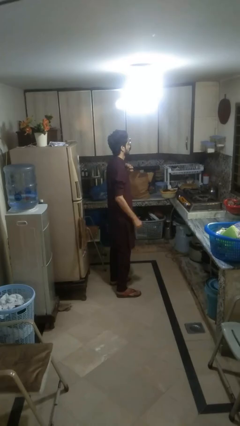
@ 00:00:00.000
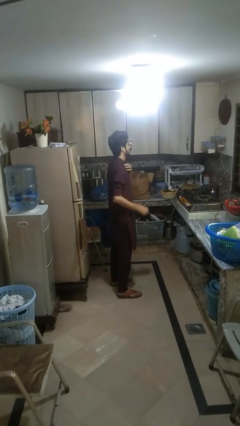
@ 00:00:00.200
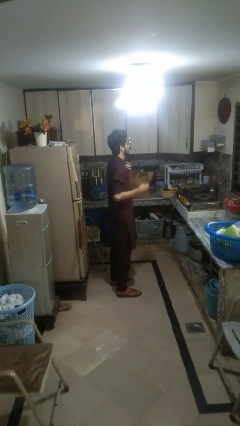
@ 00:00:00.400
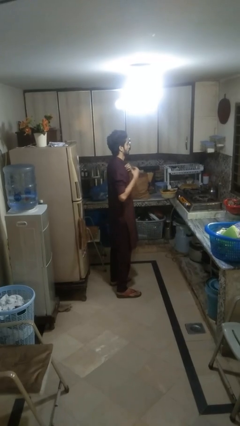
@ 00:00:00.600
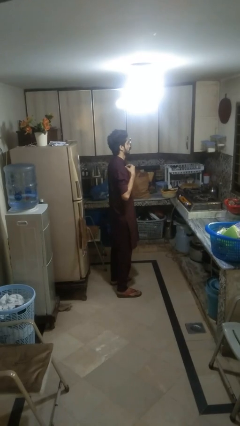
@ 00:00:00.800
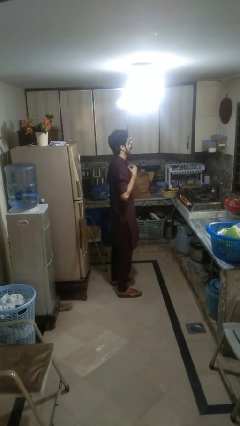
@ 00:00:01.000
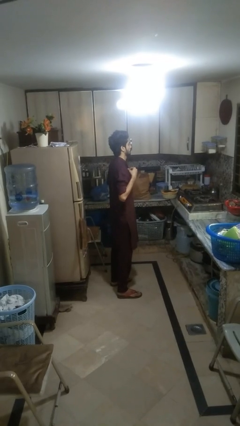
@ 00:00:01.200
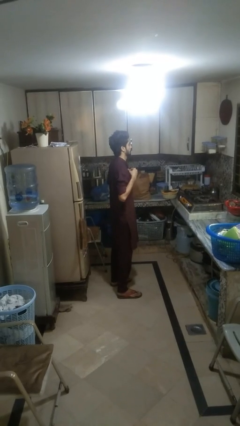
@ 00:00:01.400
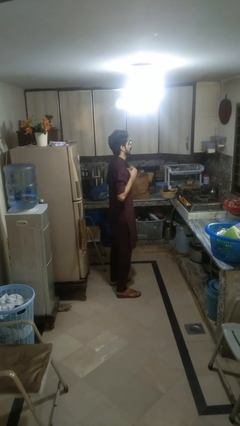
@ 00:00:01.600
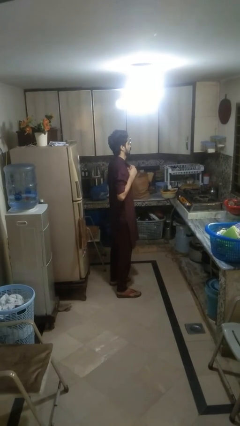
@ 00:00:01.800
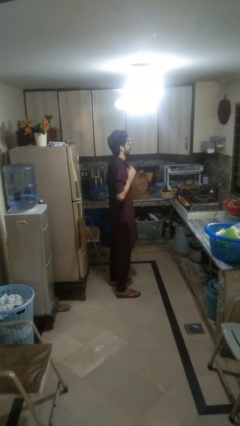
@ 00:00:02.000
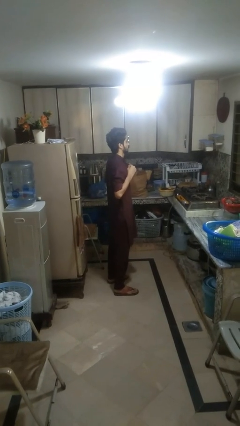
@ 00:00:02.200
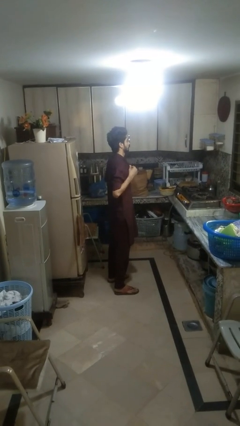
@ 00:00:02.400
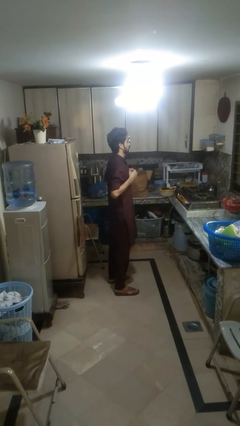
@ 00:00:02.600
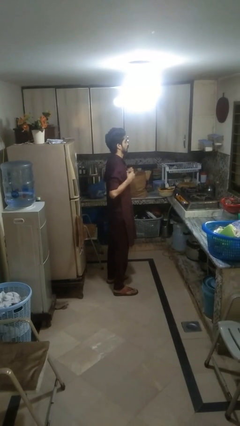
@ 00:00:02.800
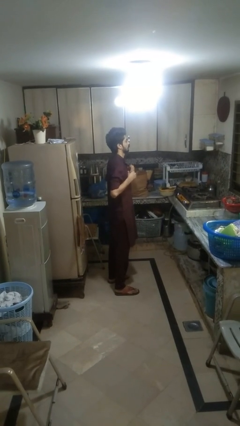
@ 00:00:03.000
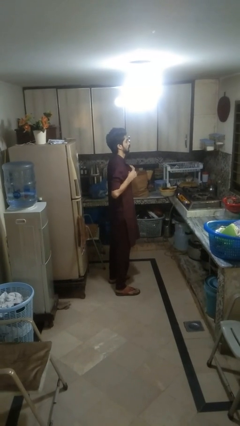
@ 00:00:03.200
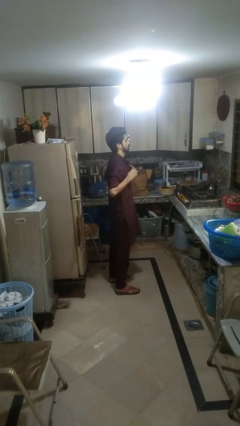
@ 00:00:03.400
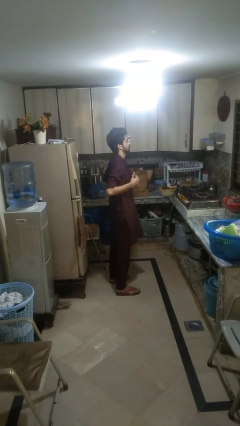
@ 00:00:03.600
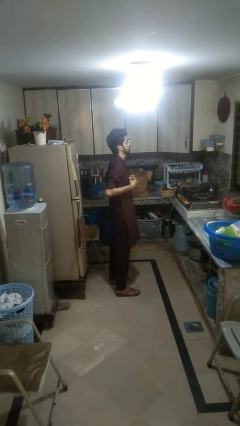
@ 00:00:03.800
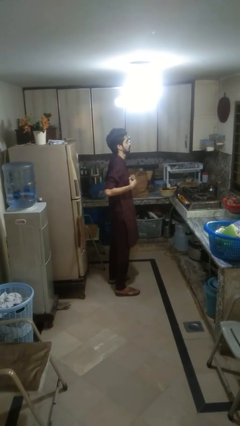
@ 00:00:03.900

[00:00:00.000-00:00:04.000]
person unbuttons shirt

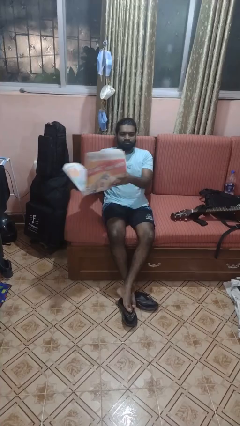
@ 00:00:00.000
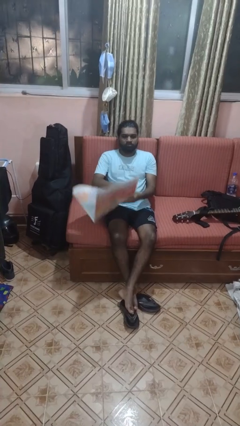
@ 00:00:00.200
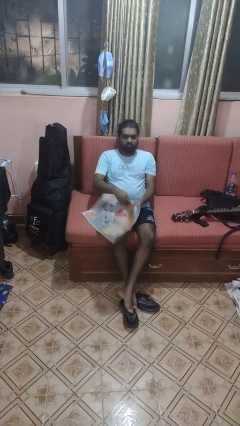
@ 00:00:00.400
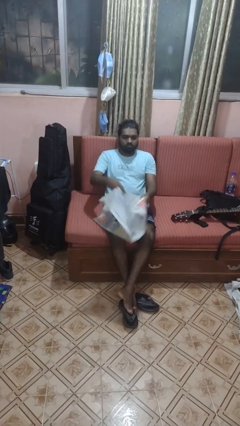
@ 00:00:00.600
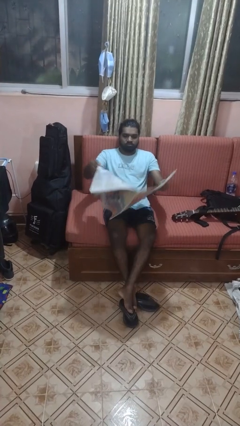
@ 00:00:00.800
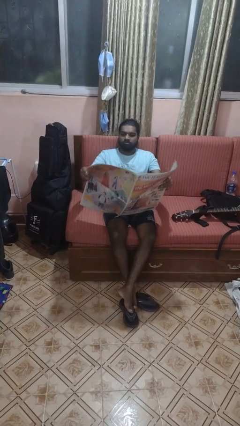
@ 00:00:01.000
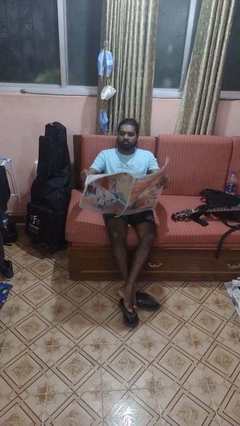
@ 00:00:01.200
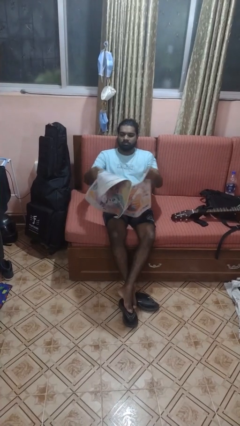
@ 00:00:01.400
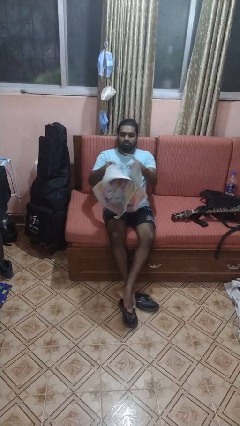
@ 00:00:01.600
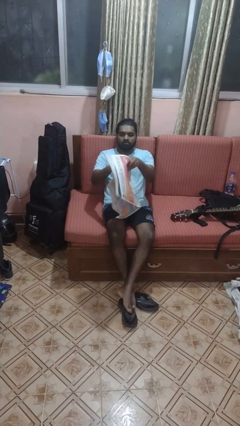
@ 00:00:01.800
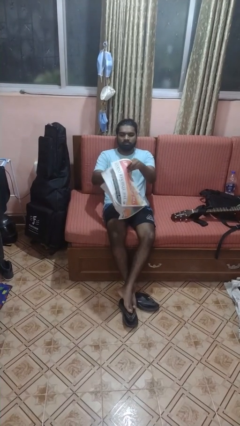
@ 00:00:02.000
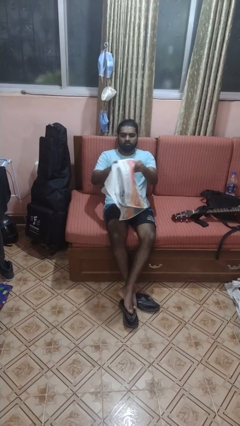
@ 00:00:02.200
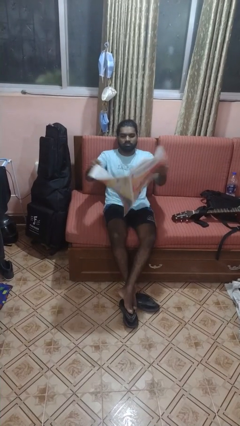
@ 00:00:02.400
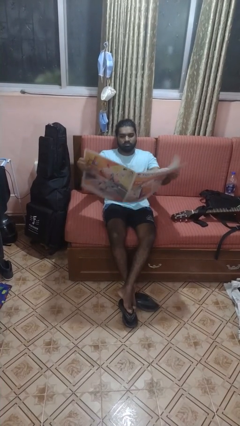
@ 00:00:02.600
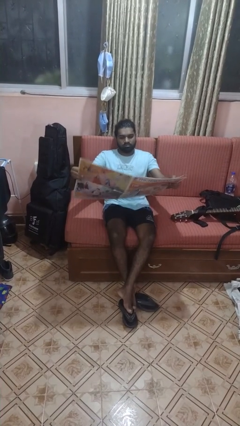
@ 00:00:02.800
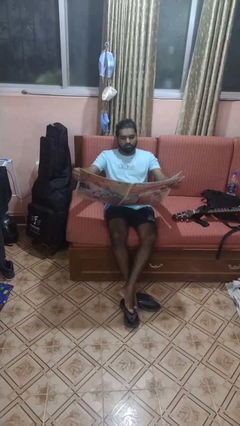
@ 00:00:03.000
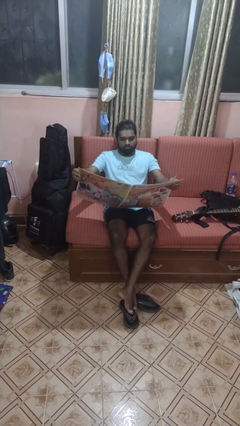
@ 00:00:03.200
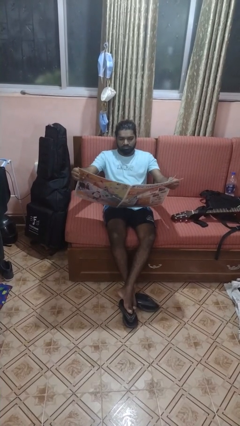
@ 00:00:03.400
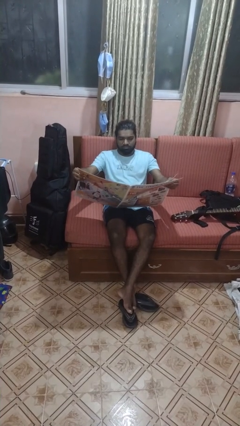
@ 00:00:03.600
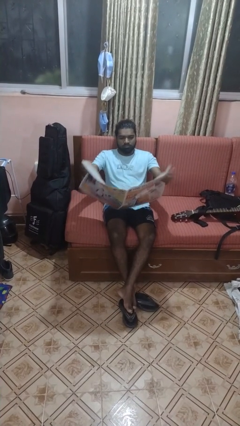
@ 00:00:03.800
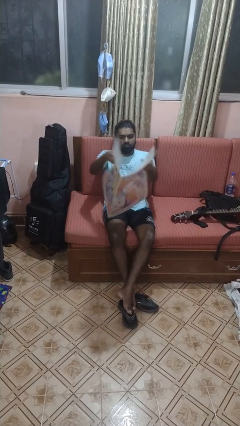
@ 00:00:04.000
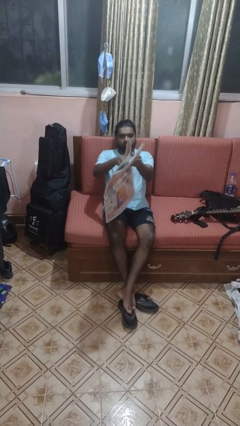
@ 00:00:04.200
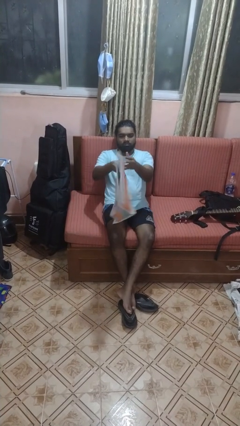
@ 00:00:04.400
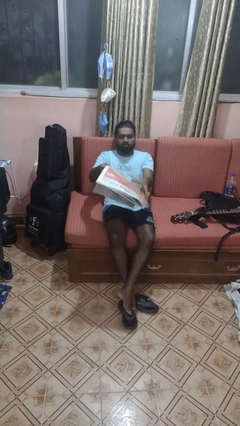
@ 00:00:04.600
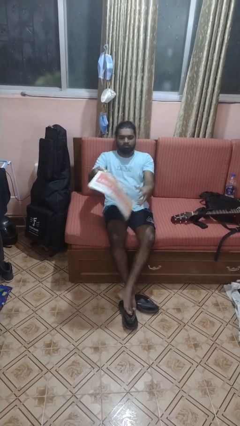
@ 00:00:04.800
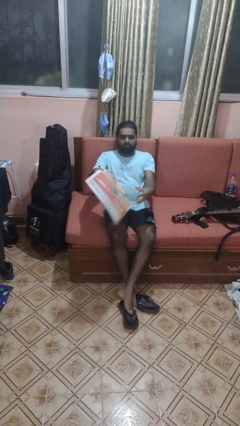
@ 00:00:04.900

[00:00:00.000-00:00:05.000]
person reads newspaper

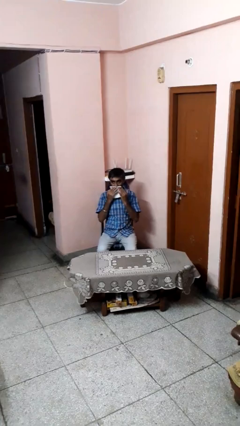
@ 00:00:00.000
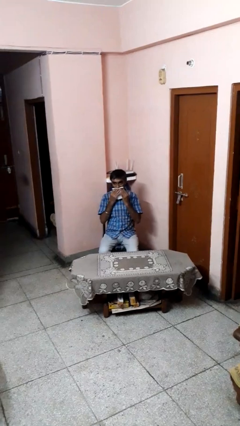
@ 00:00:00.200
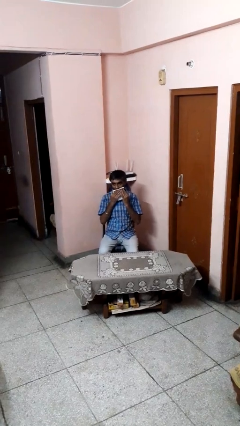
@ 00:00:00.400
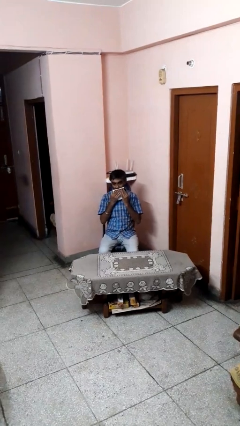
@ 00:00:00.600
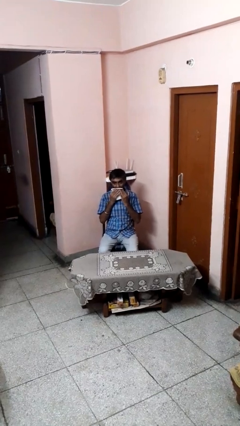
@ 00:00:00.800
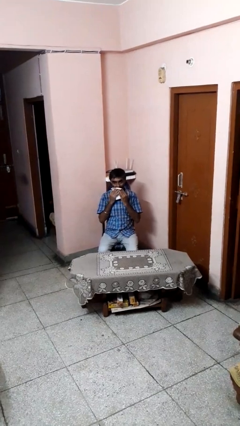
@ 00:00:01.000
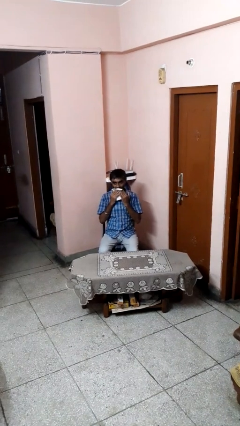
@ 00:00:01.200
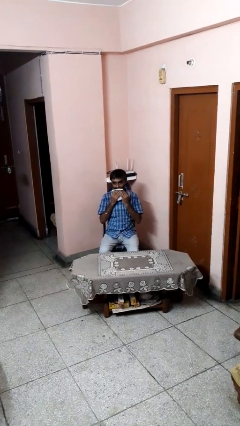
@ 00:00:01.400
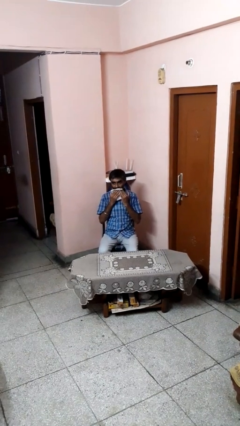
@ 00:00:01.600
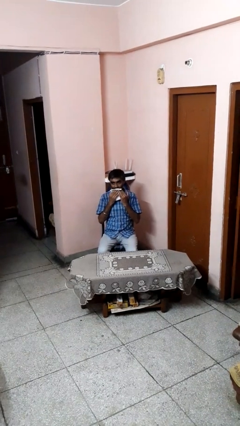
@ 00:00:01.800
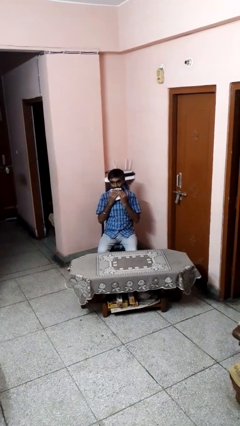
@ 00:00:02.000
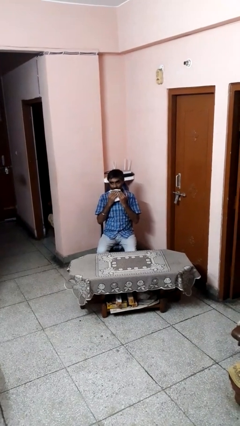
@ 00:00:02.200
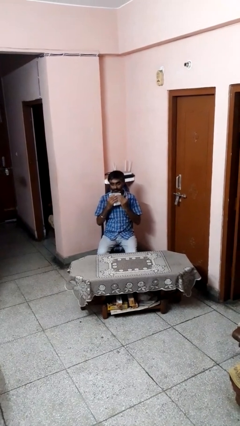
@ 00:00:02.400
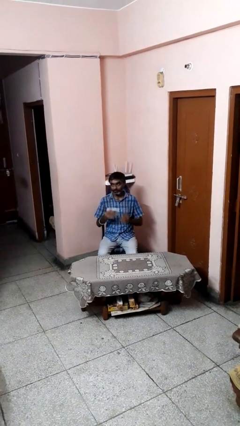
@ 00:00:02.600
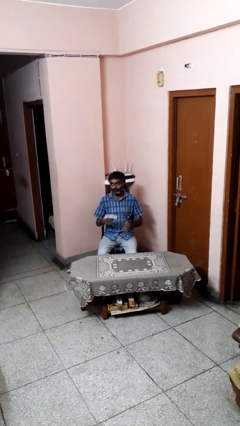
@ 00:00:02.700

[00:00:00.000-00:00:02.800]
person wipes mouth with napkin

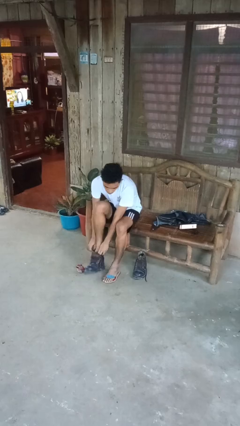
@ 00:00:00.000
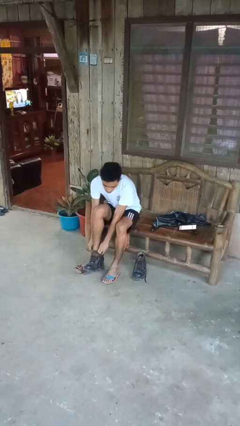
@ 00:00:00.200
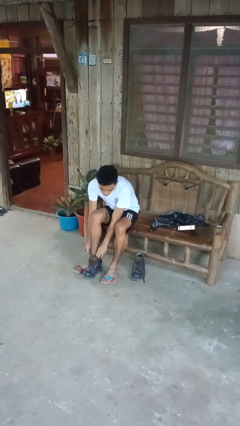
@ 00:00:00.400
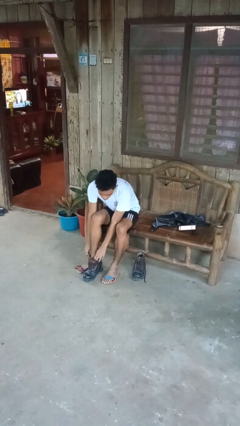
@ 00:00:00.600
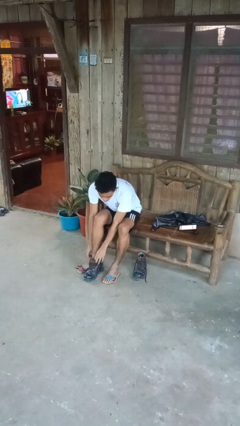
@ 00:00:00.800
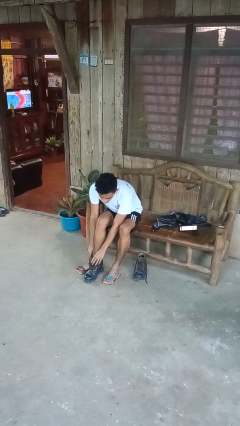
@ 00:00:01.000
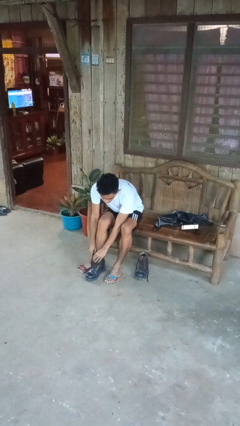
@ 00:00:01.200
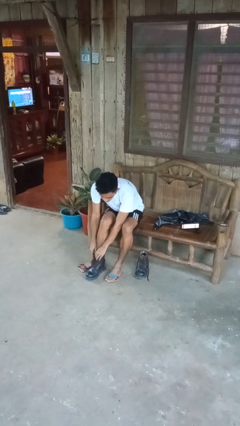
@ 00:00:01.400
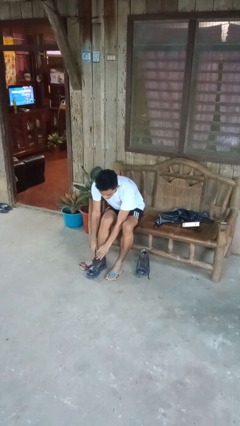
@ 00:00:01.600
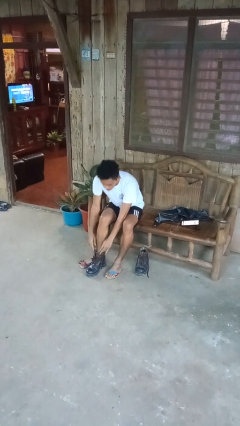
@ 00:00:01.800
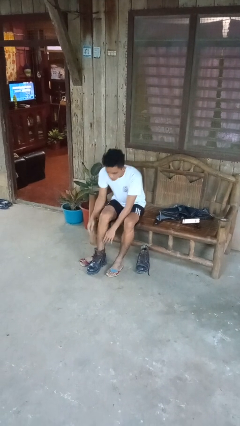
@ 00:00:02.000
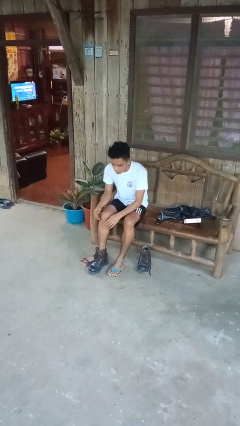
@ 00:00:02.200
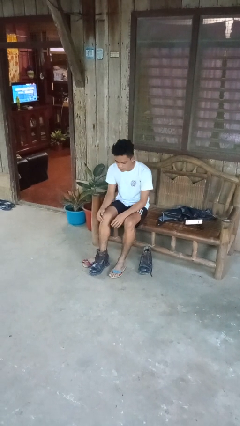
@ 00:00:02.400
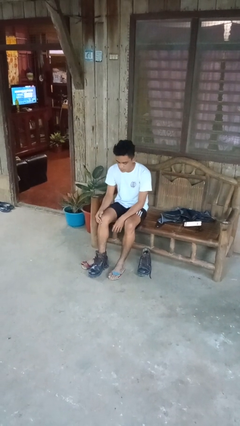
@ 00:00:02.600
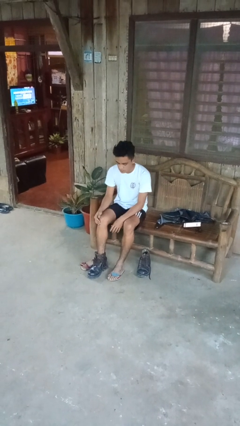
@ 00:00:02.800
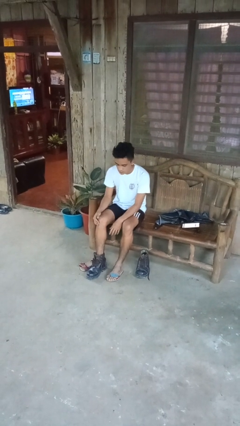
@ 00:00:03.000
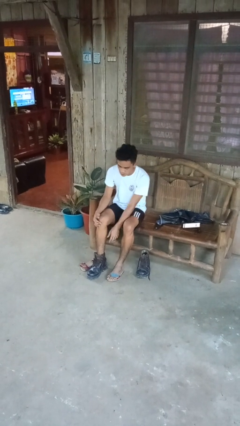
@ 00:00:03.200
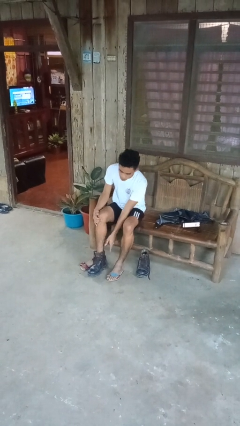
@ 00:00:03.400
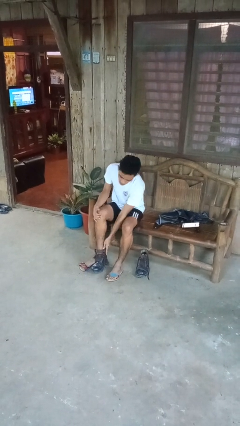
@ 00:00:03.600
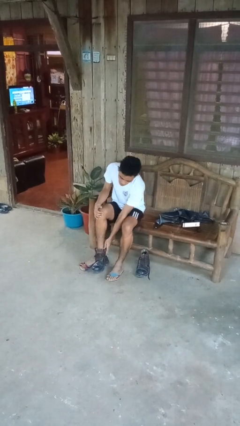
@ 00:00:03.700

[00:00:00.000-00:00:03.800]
person puts on boots

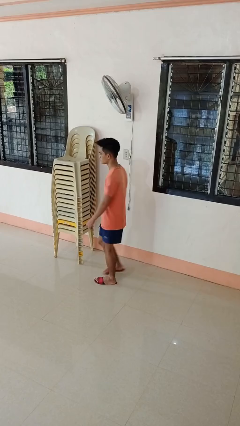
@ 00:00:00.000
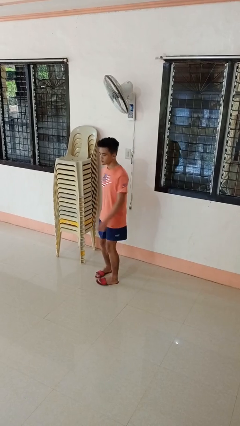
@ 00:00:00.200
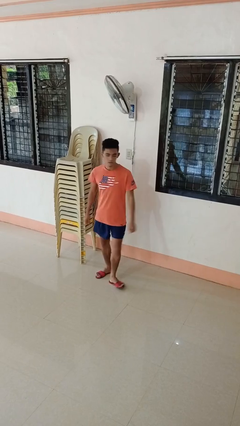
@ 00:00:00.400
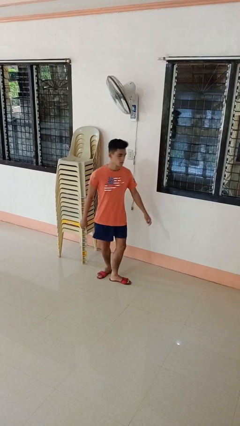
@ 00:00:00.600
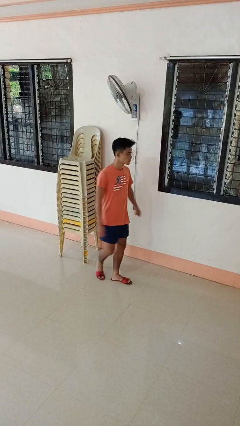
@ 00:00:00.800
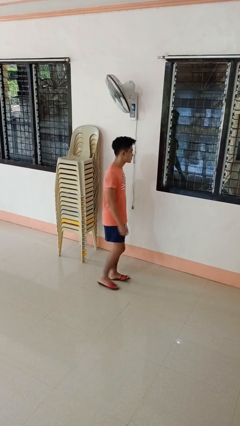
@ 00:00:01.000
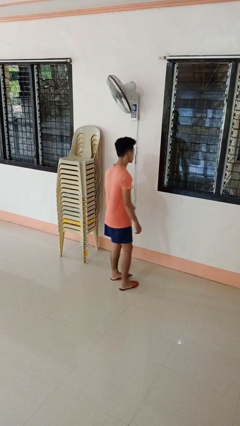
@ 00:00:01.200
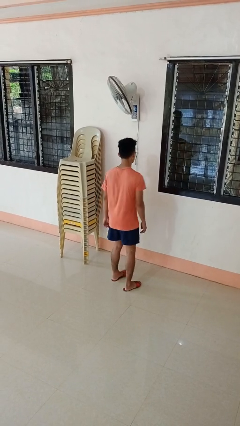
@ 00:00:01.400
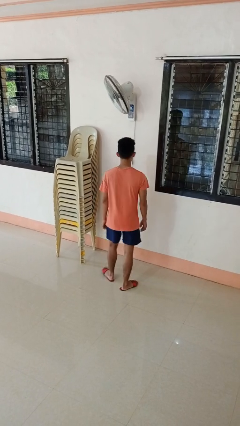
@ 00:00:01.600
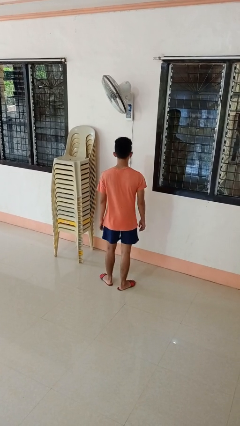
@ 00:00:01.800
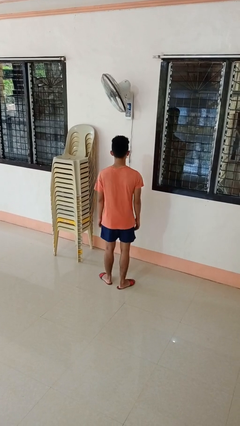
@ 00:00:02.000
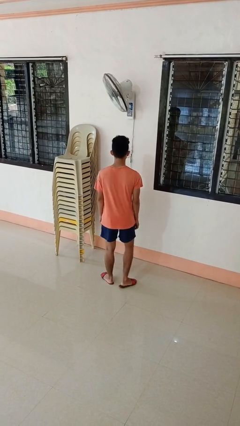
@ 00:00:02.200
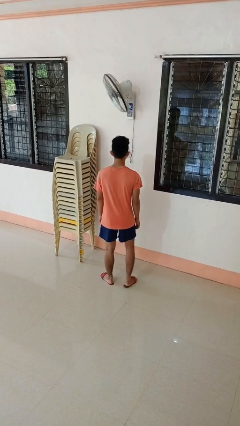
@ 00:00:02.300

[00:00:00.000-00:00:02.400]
person twirls
